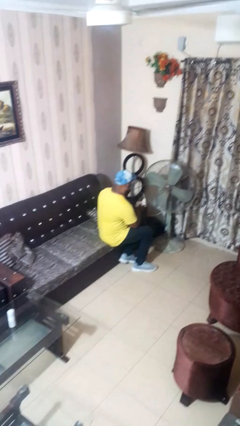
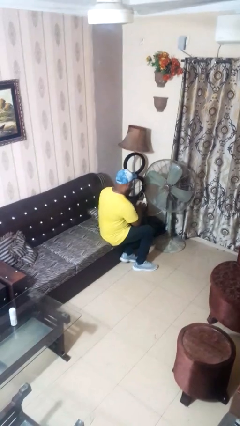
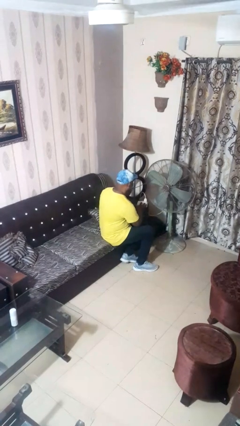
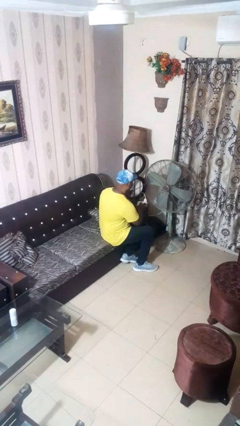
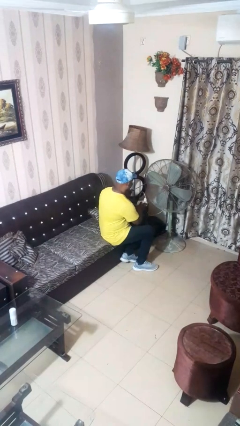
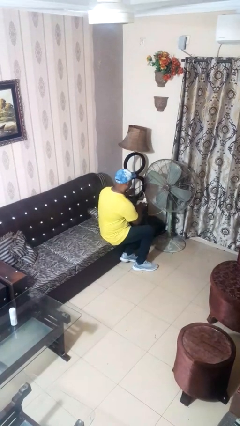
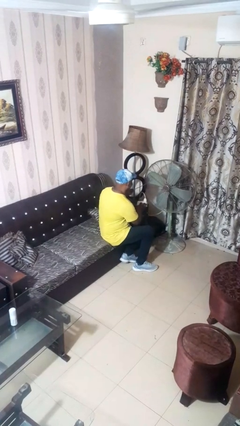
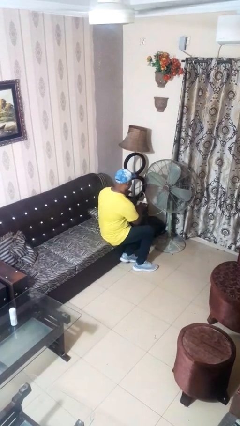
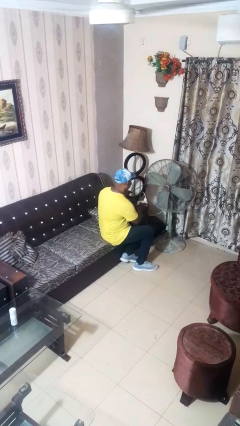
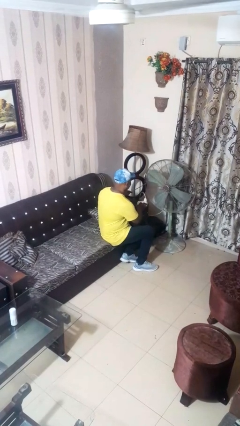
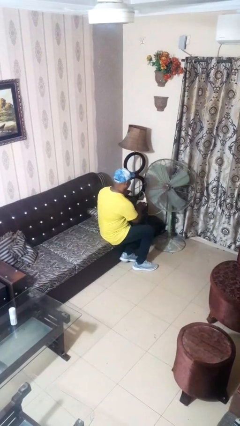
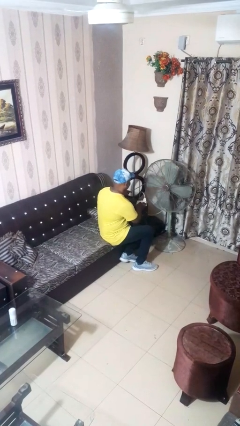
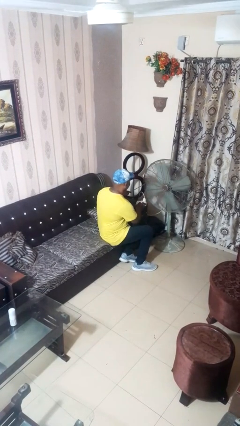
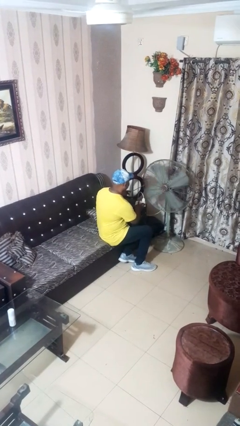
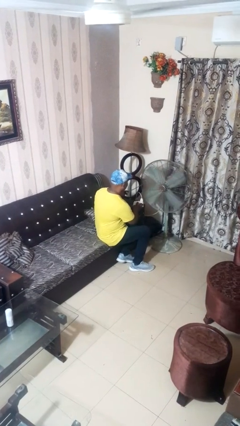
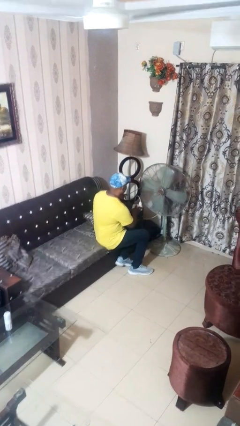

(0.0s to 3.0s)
person turns on fan

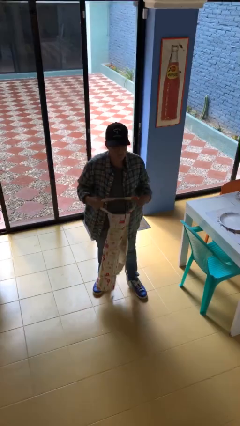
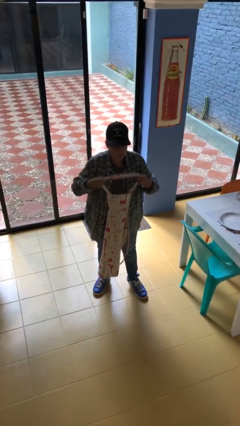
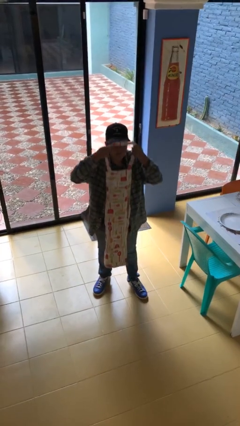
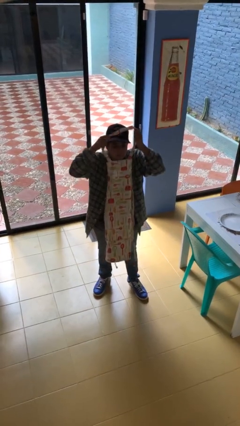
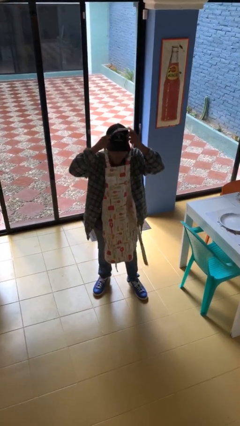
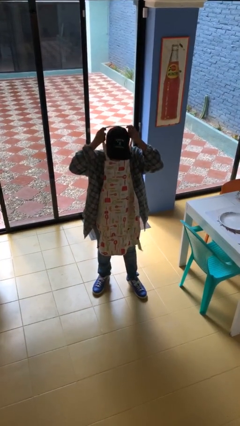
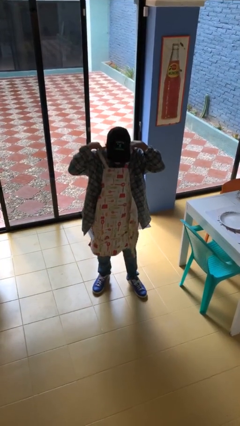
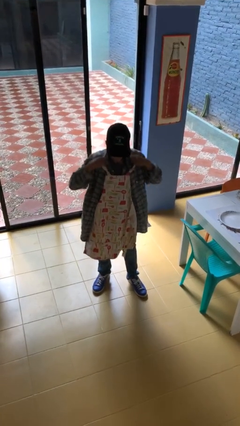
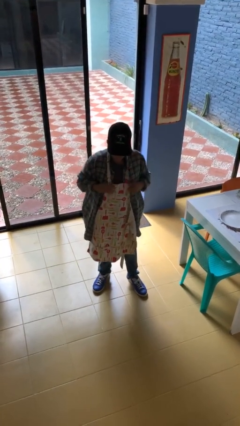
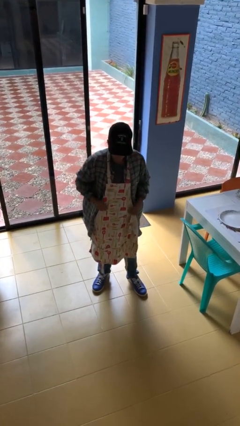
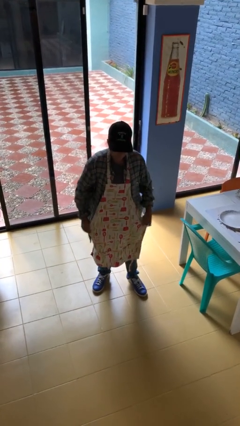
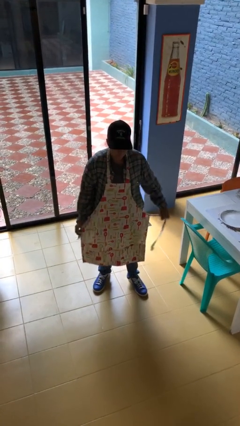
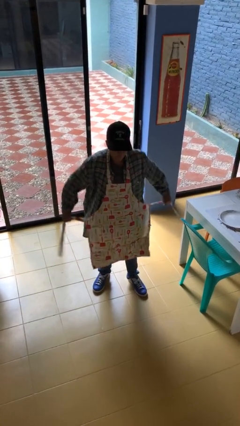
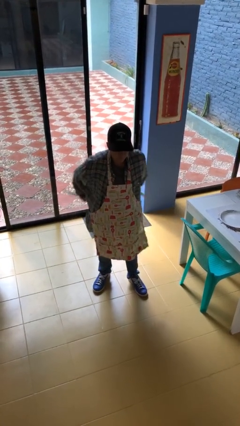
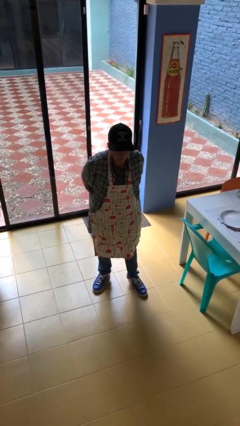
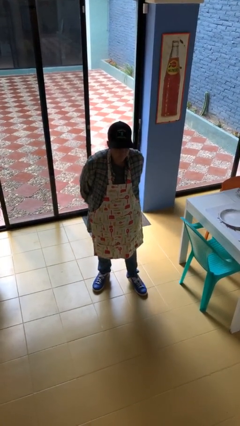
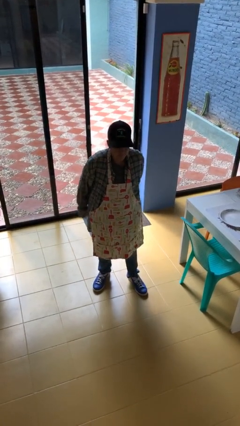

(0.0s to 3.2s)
person puts on apron

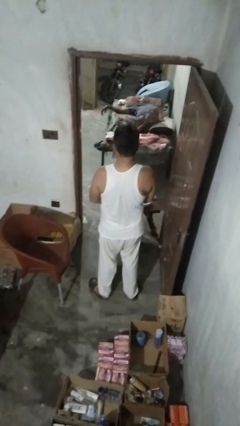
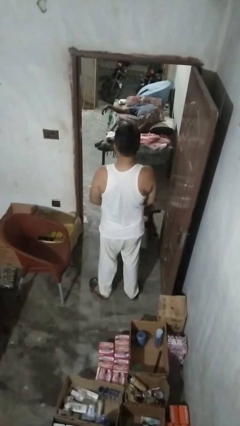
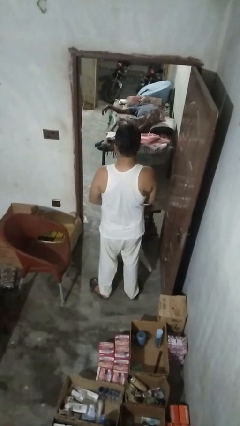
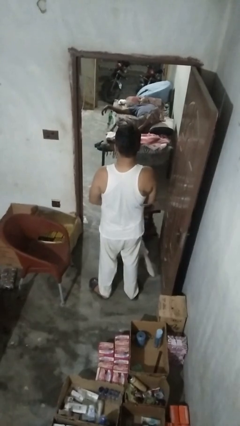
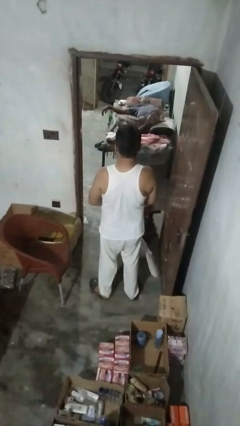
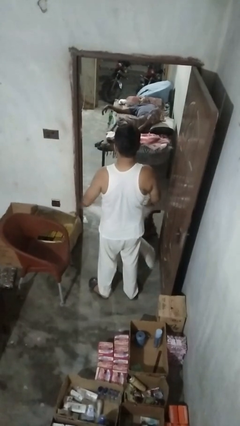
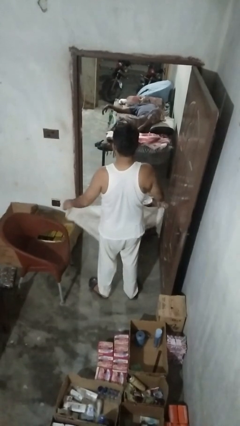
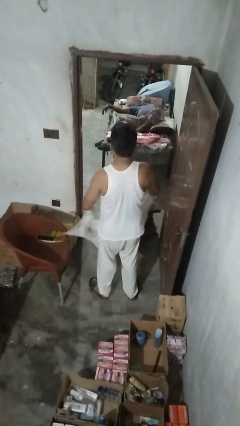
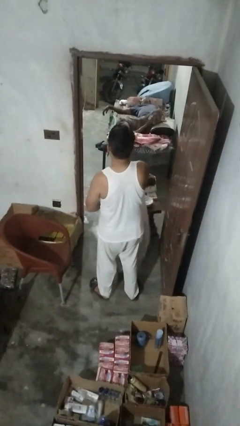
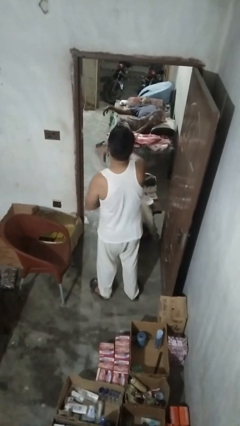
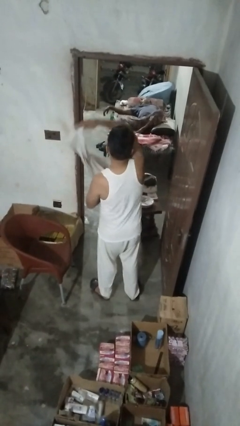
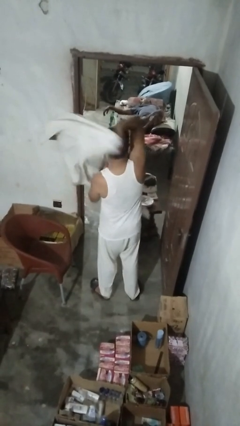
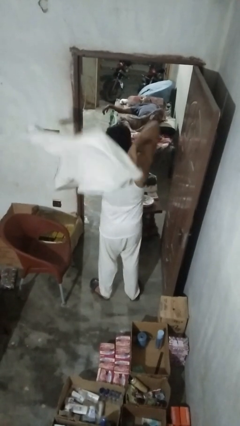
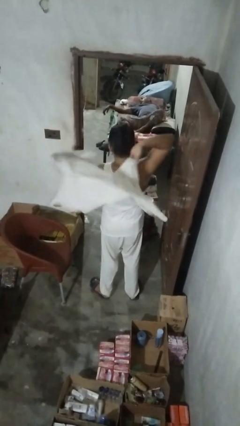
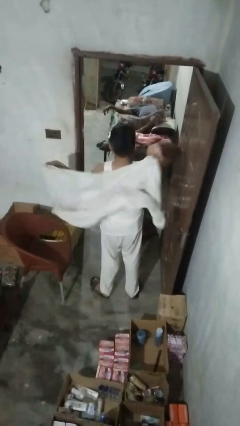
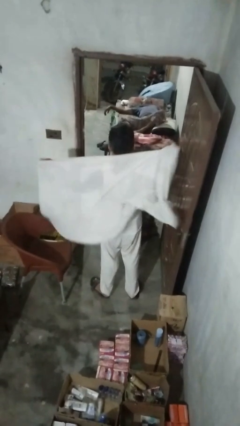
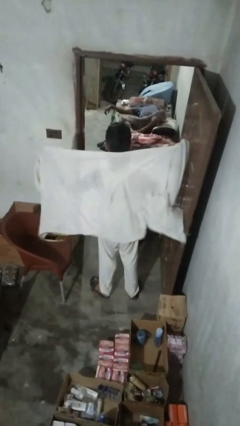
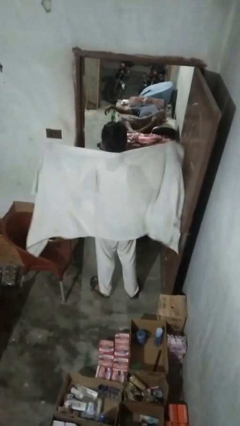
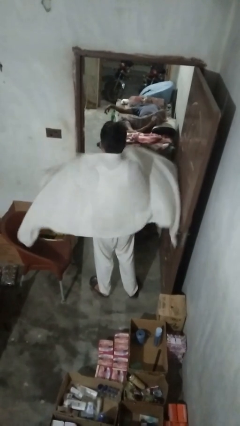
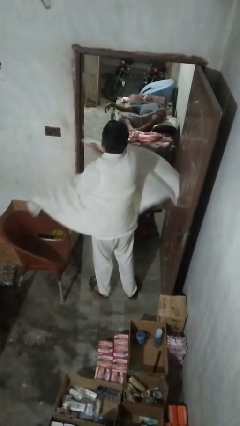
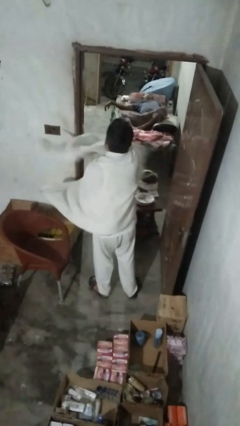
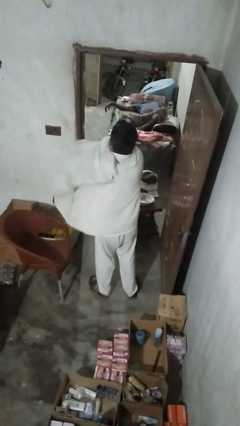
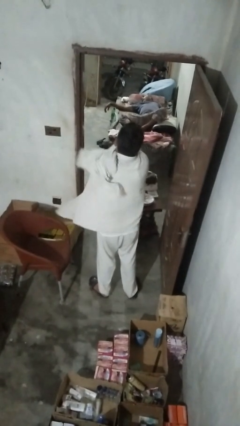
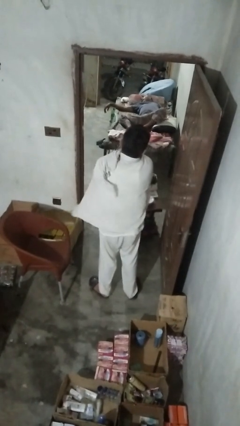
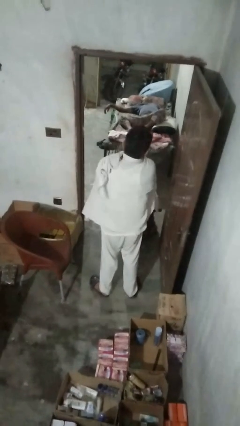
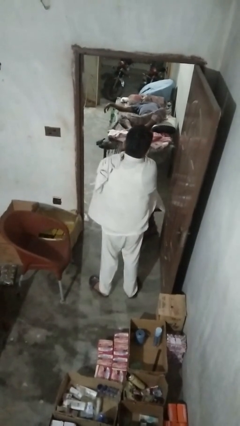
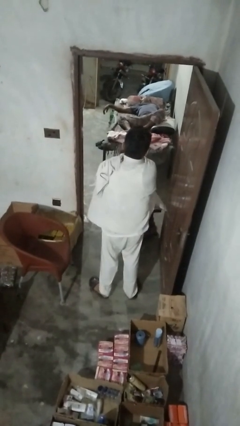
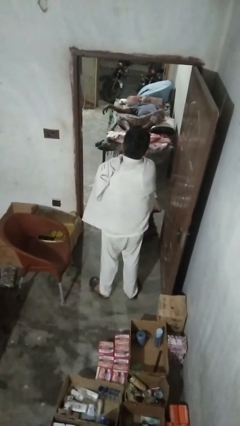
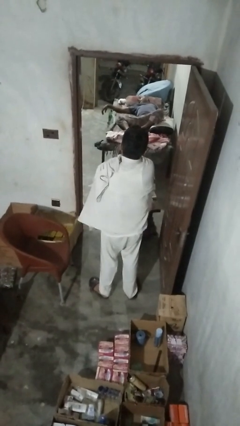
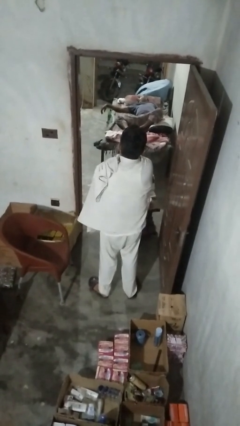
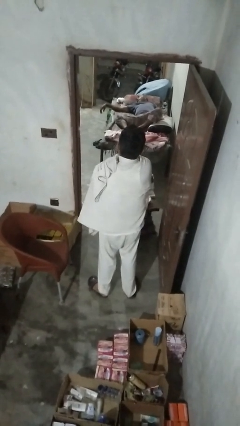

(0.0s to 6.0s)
person folds blanket

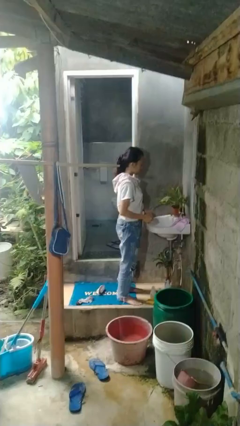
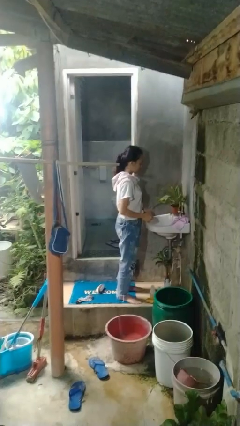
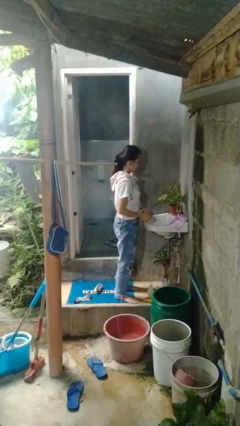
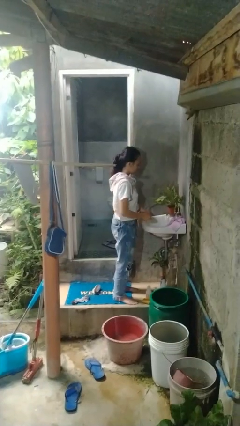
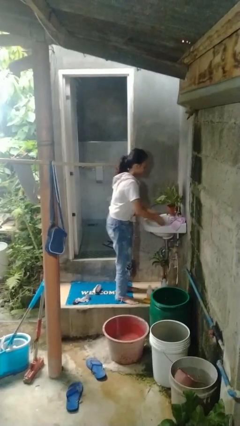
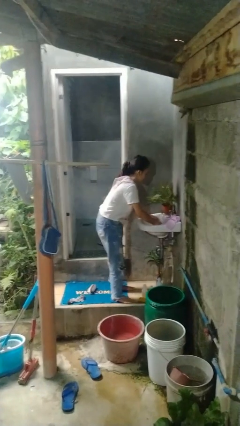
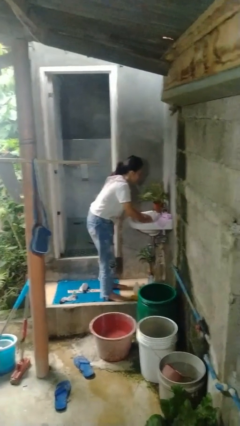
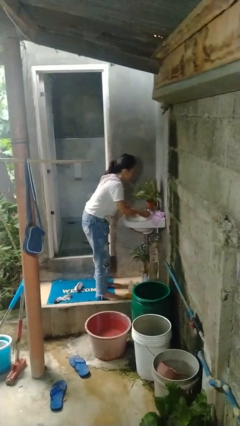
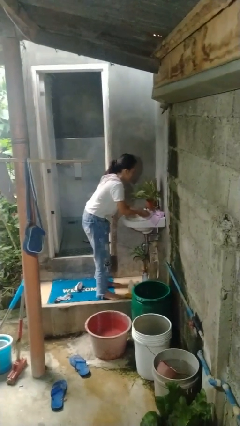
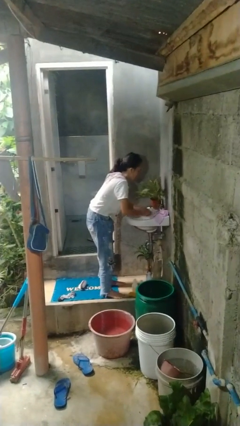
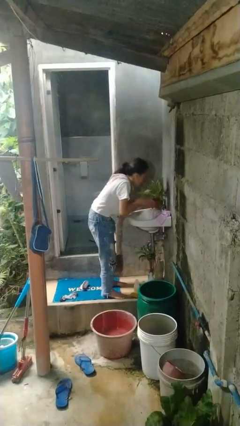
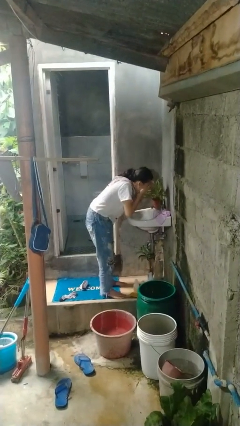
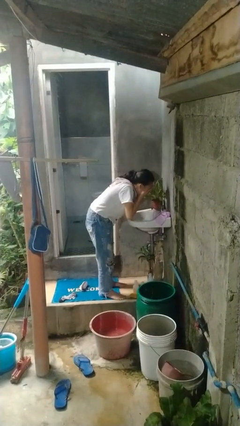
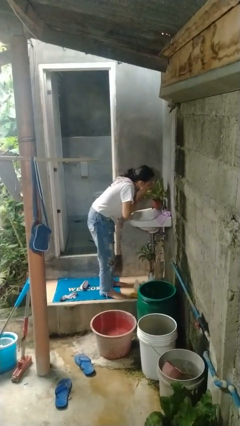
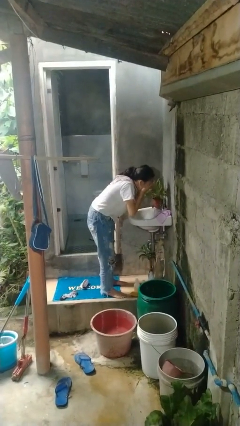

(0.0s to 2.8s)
person washes face

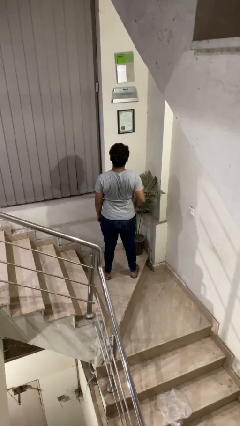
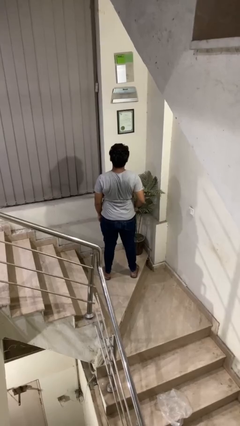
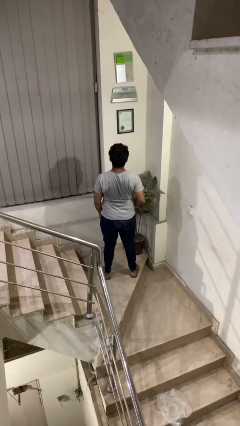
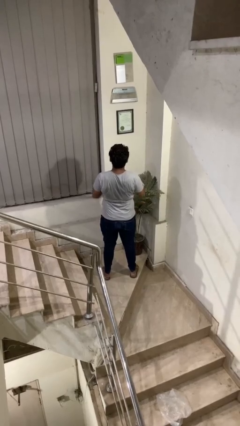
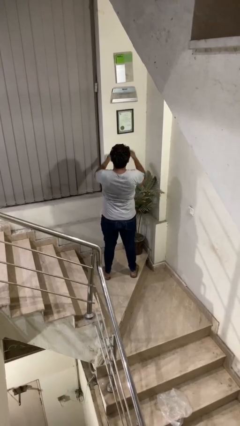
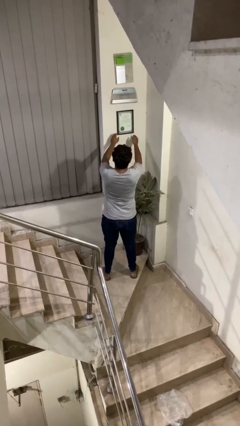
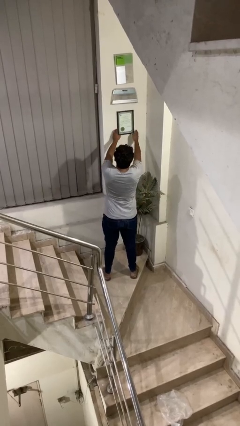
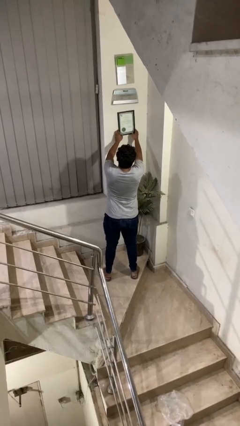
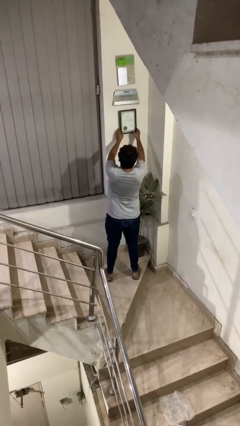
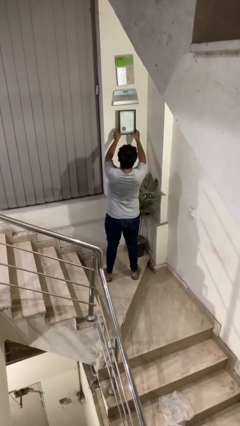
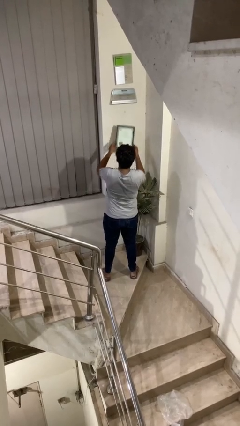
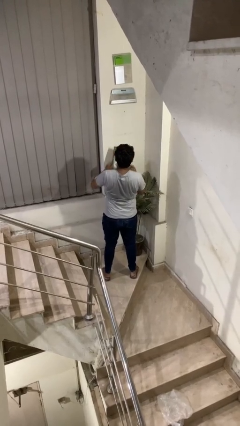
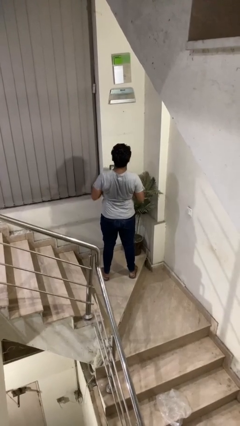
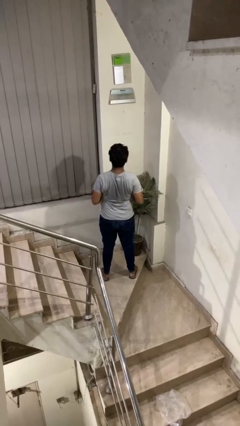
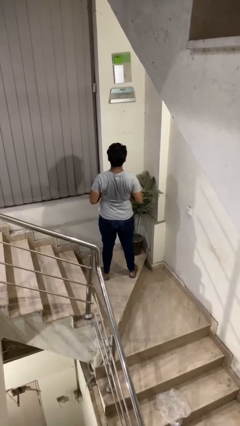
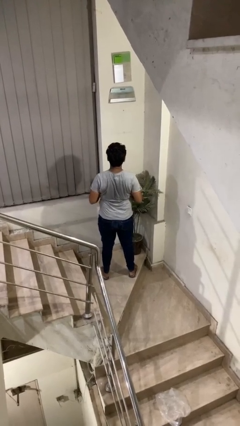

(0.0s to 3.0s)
person takes down picture frame
